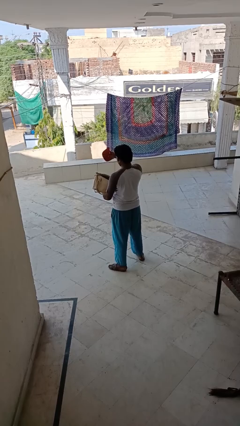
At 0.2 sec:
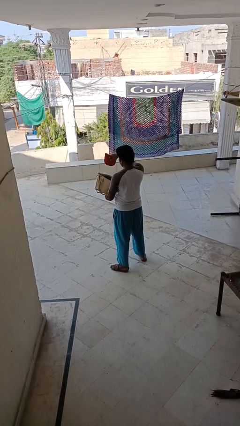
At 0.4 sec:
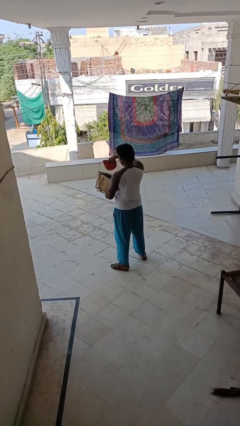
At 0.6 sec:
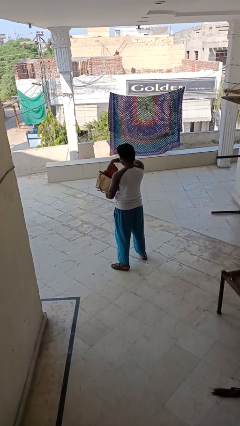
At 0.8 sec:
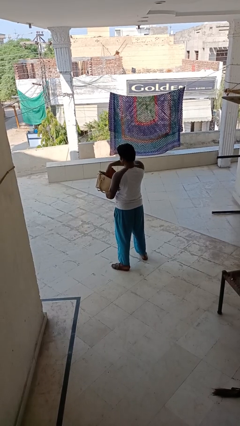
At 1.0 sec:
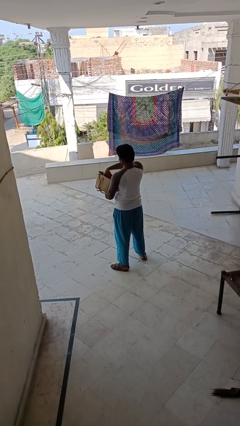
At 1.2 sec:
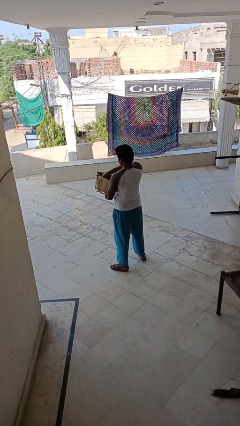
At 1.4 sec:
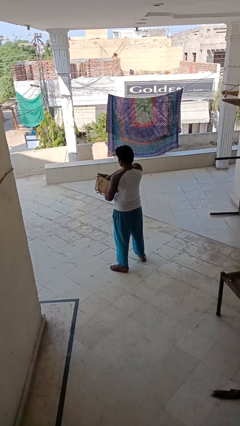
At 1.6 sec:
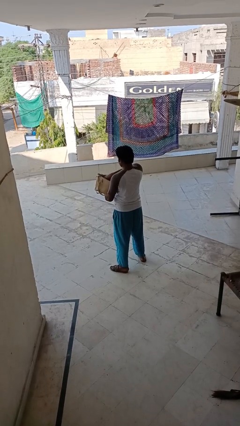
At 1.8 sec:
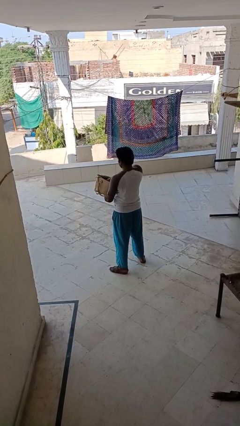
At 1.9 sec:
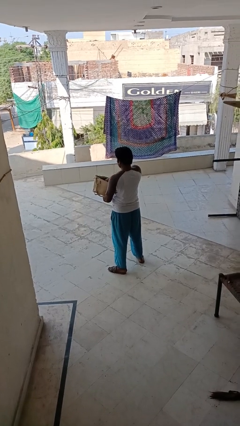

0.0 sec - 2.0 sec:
person puts object into purse

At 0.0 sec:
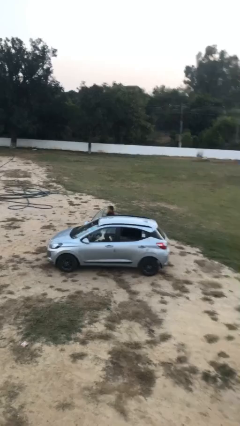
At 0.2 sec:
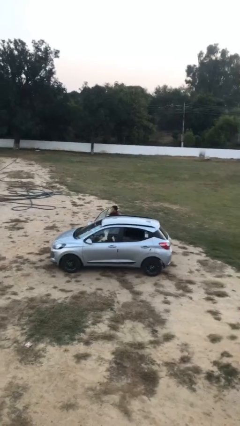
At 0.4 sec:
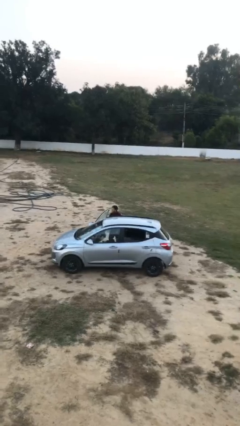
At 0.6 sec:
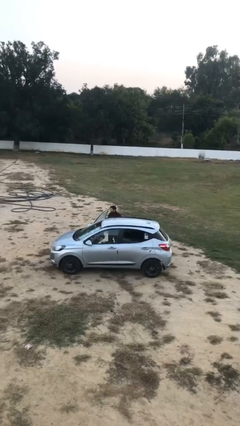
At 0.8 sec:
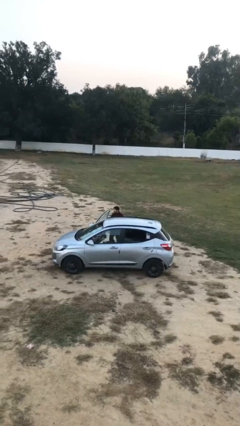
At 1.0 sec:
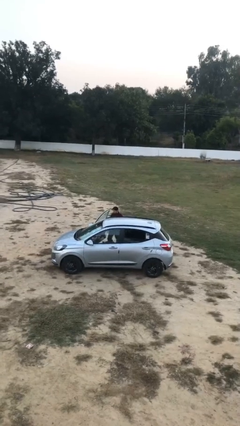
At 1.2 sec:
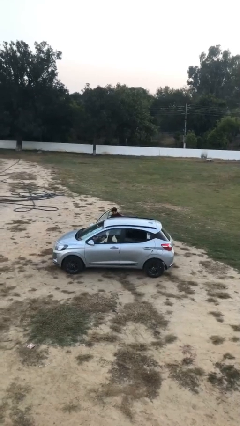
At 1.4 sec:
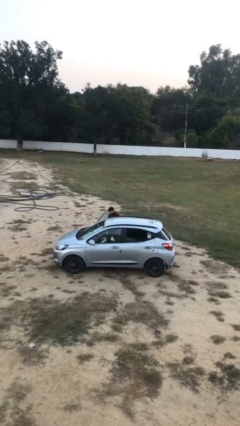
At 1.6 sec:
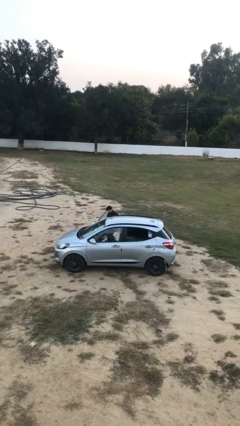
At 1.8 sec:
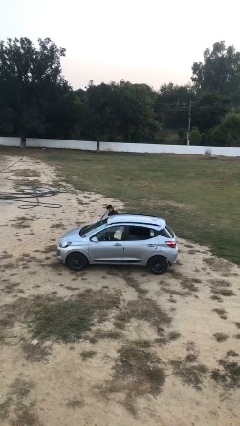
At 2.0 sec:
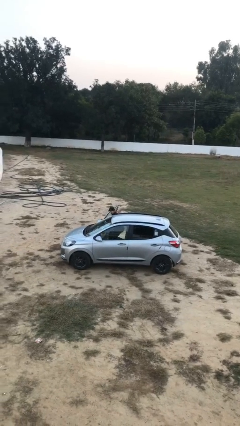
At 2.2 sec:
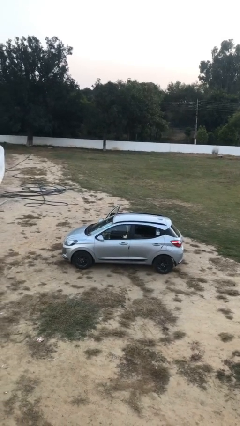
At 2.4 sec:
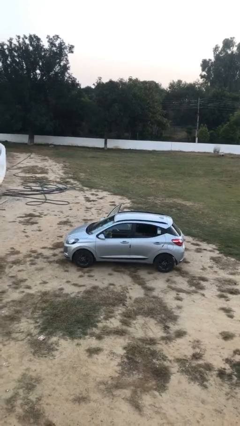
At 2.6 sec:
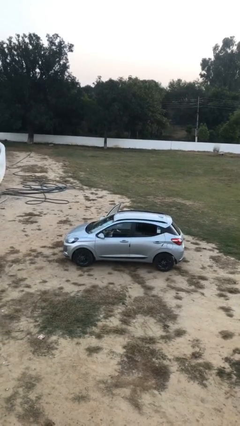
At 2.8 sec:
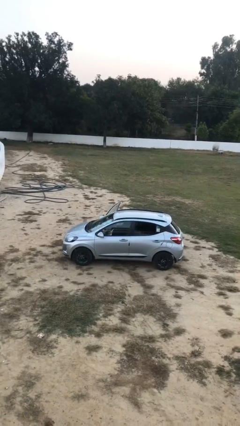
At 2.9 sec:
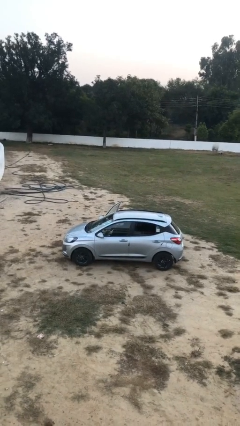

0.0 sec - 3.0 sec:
person enters car

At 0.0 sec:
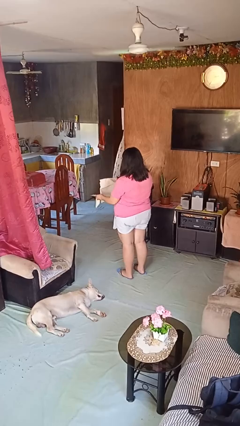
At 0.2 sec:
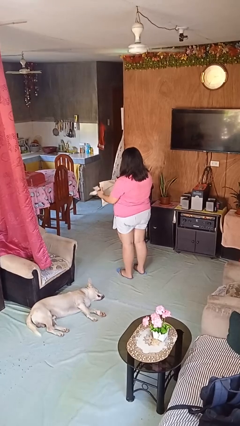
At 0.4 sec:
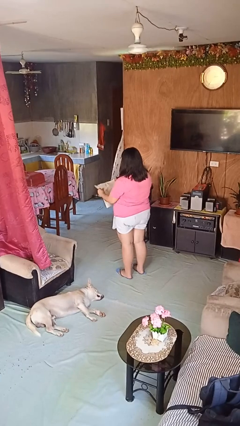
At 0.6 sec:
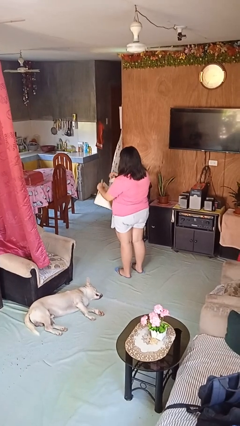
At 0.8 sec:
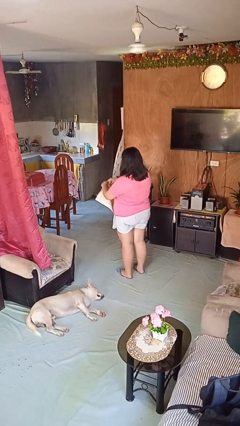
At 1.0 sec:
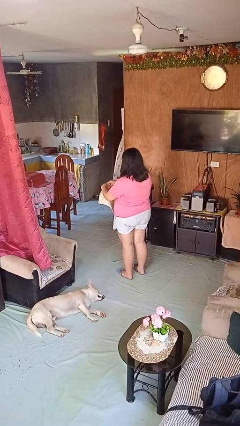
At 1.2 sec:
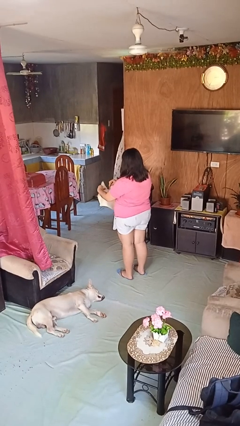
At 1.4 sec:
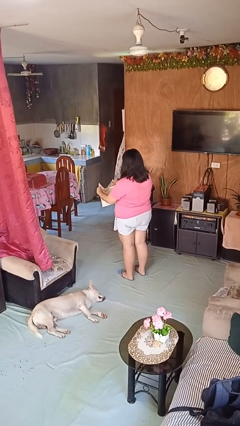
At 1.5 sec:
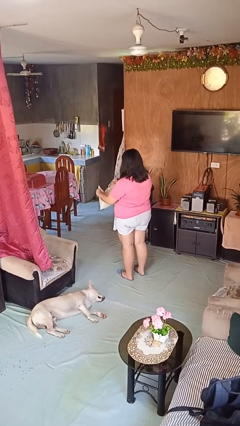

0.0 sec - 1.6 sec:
person tears paper

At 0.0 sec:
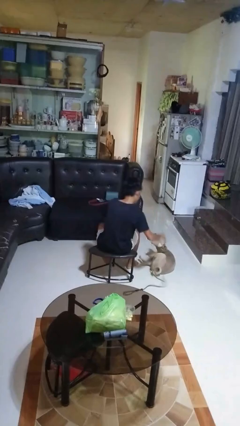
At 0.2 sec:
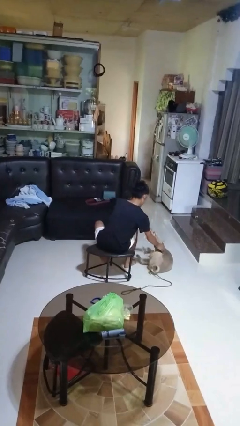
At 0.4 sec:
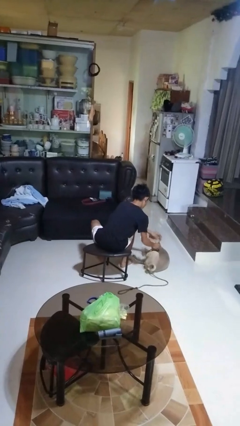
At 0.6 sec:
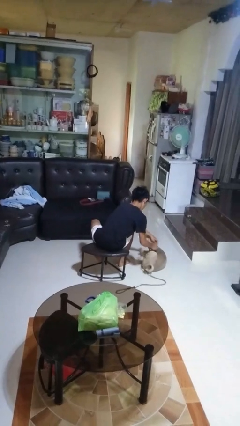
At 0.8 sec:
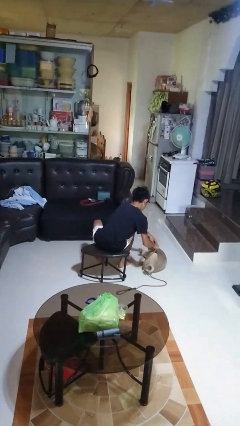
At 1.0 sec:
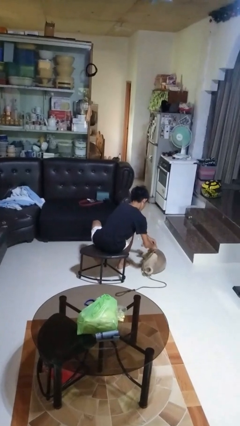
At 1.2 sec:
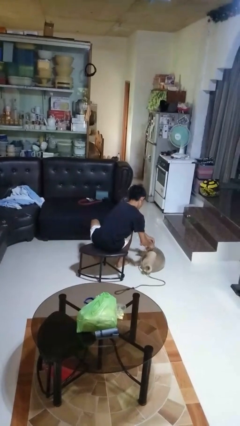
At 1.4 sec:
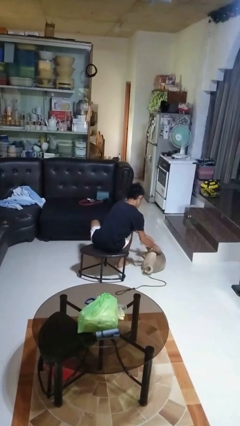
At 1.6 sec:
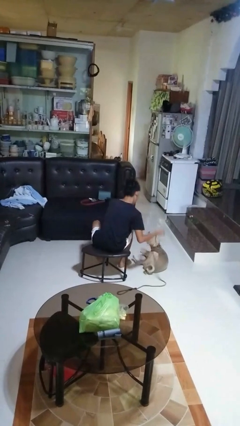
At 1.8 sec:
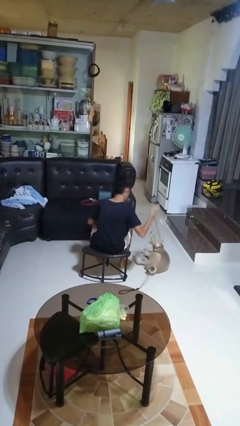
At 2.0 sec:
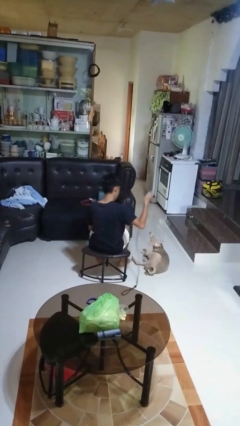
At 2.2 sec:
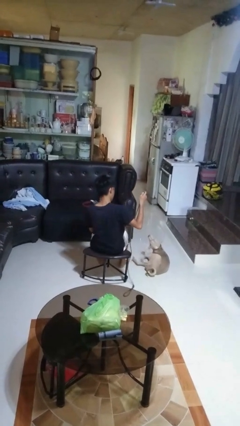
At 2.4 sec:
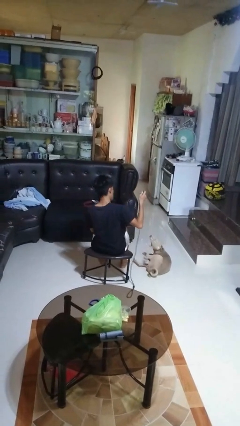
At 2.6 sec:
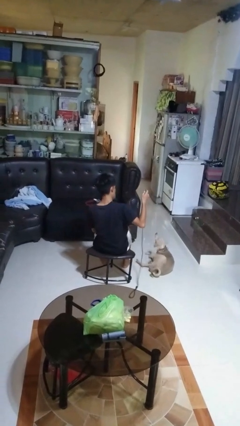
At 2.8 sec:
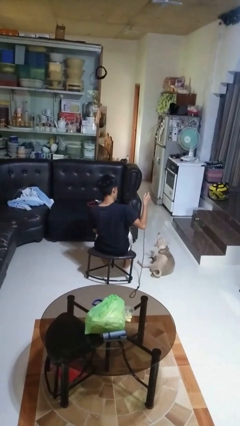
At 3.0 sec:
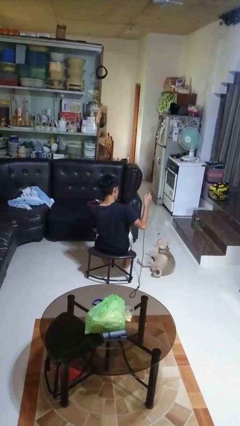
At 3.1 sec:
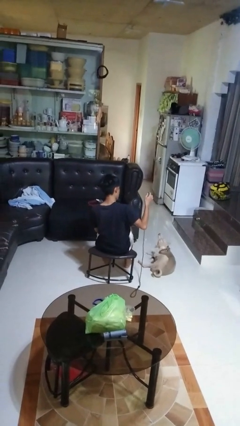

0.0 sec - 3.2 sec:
person unattaches leash from dog

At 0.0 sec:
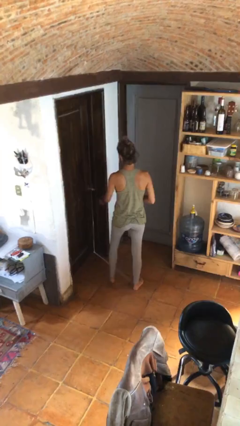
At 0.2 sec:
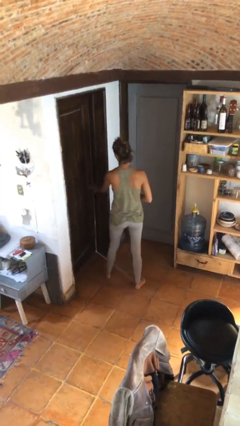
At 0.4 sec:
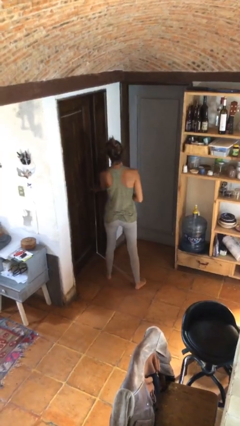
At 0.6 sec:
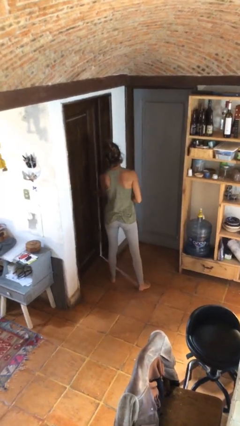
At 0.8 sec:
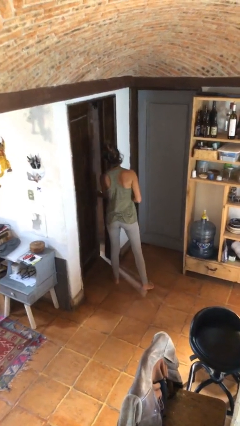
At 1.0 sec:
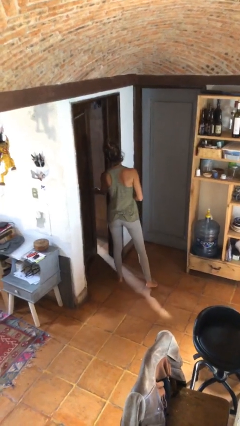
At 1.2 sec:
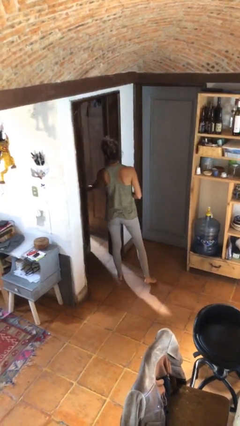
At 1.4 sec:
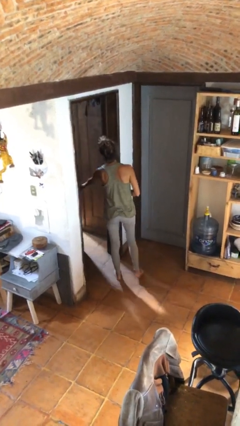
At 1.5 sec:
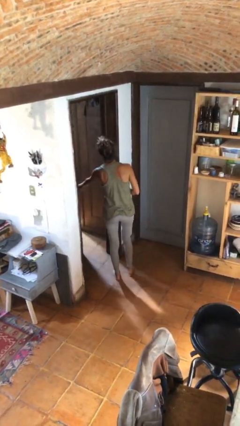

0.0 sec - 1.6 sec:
person opens facility door

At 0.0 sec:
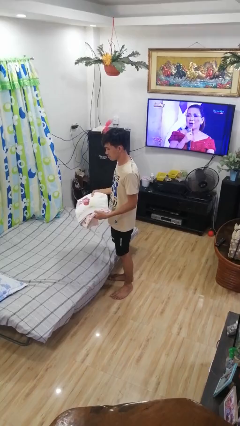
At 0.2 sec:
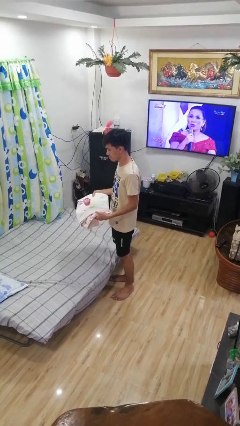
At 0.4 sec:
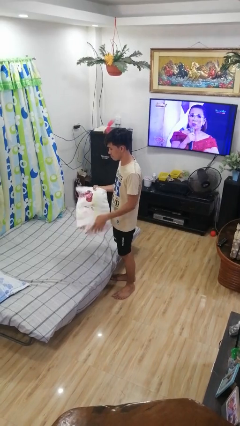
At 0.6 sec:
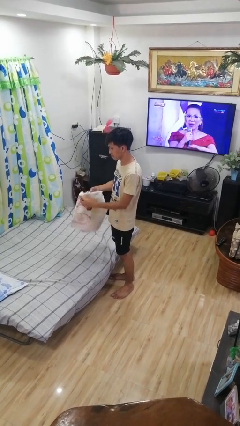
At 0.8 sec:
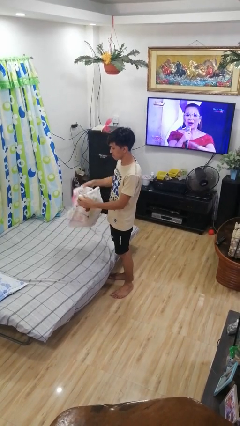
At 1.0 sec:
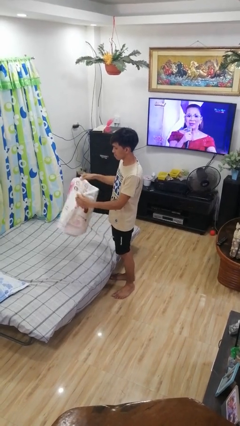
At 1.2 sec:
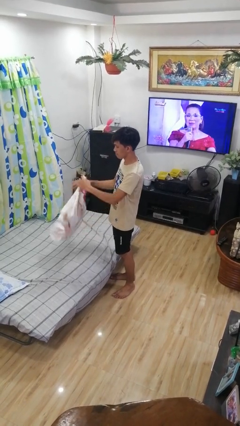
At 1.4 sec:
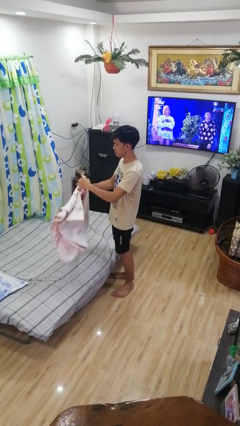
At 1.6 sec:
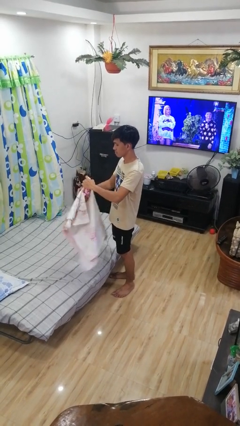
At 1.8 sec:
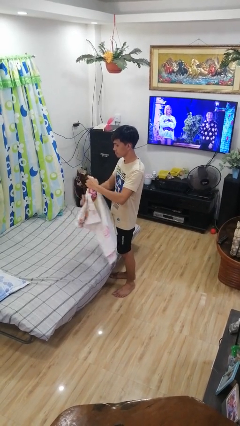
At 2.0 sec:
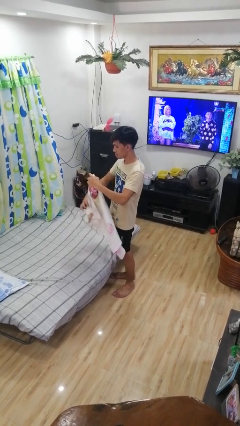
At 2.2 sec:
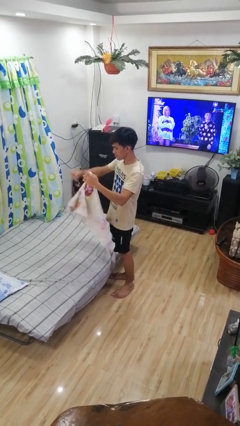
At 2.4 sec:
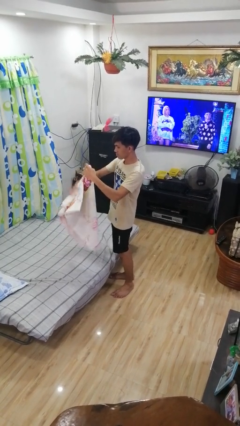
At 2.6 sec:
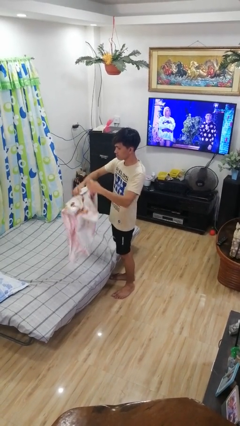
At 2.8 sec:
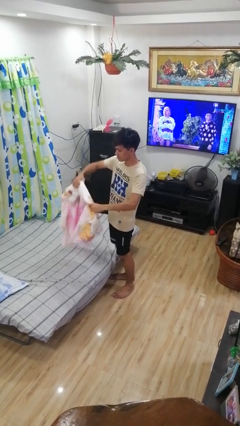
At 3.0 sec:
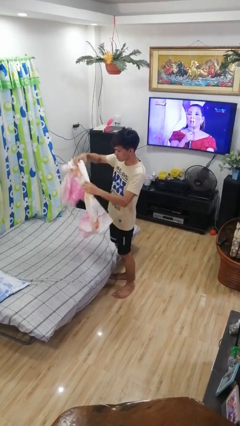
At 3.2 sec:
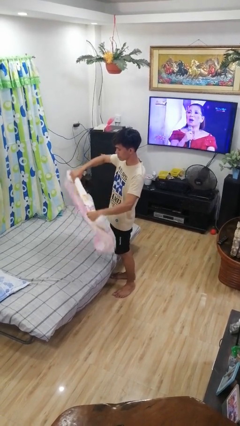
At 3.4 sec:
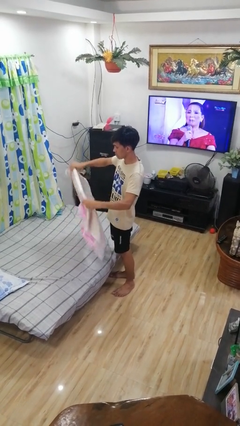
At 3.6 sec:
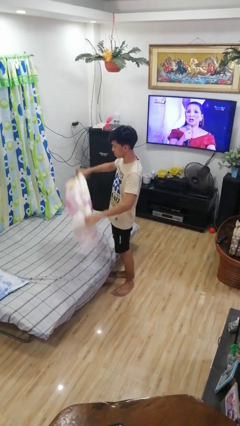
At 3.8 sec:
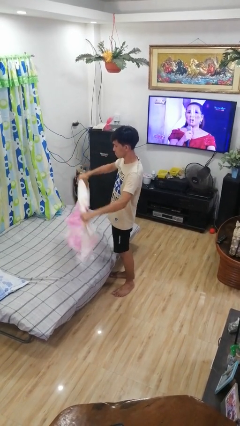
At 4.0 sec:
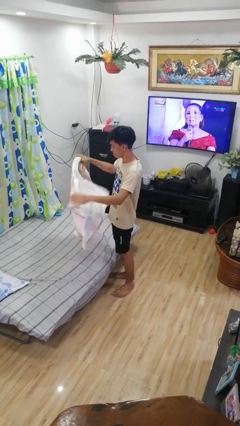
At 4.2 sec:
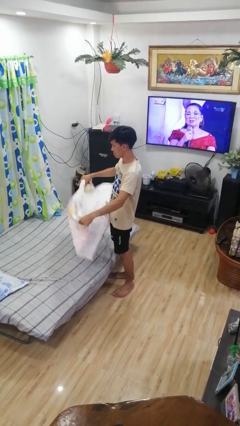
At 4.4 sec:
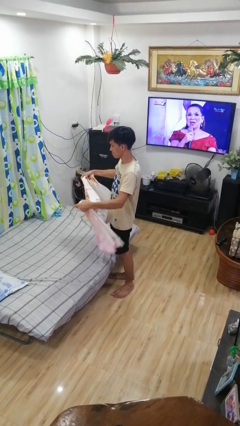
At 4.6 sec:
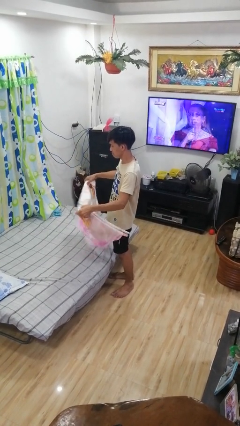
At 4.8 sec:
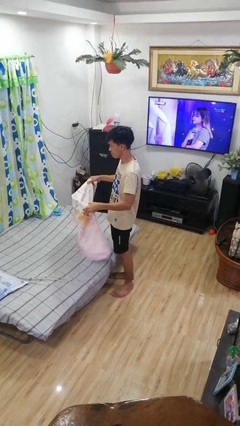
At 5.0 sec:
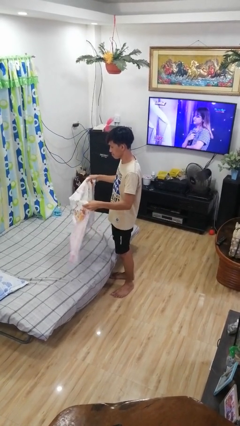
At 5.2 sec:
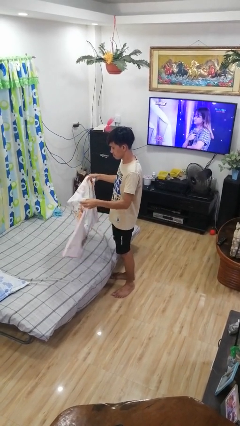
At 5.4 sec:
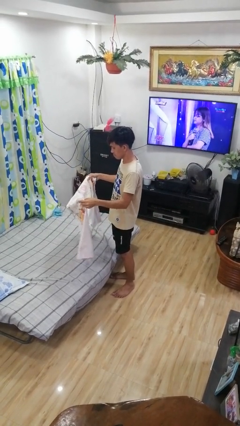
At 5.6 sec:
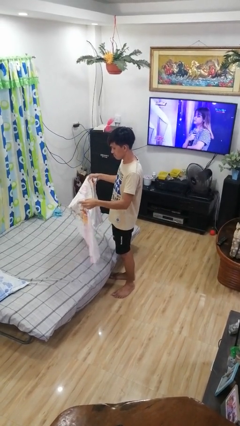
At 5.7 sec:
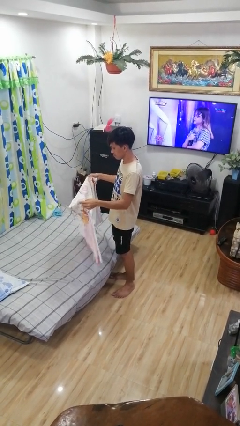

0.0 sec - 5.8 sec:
person unfolds blanket
